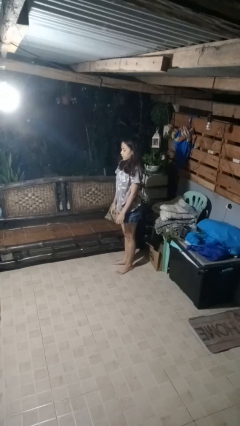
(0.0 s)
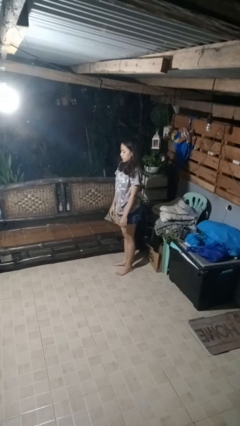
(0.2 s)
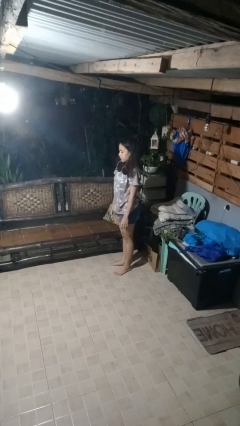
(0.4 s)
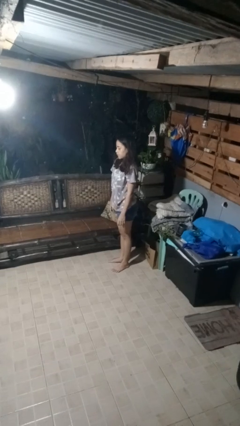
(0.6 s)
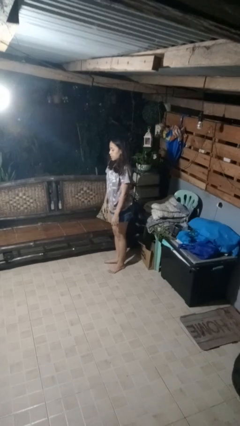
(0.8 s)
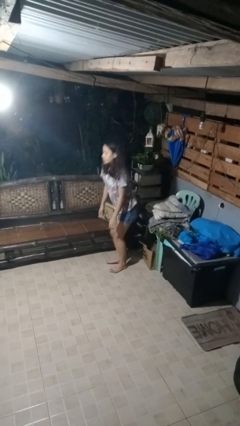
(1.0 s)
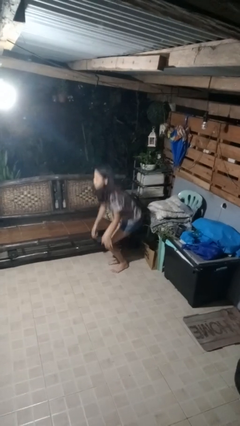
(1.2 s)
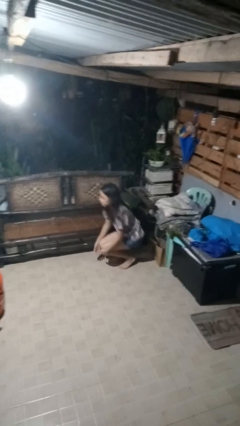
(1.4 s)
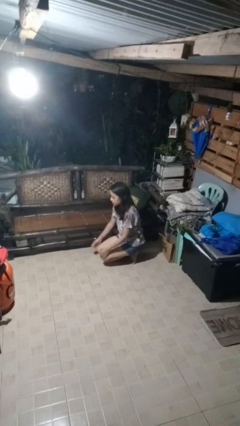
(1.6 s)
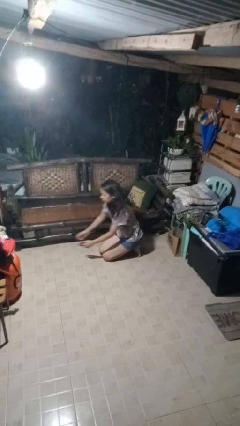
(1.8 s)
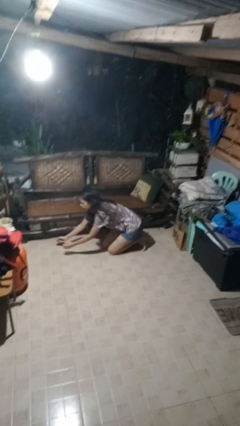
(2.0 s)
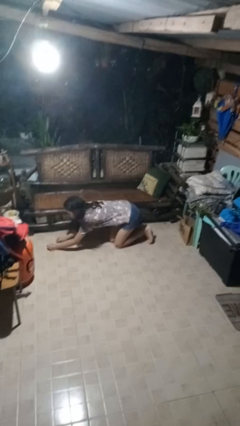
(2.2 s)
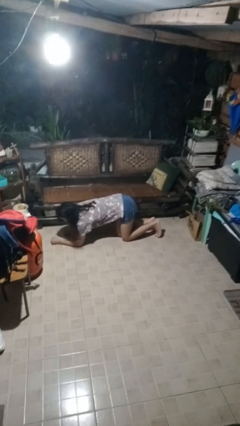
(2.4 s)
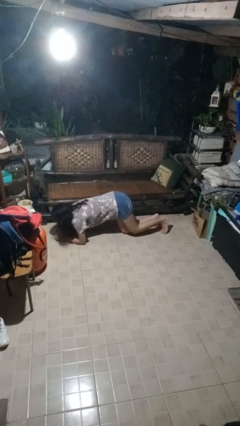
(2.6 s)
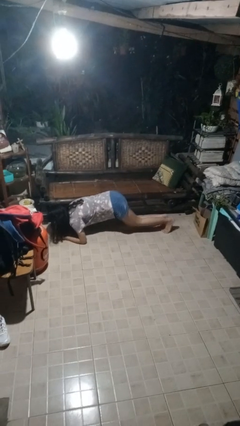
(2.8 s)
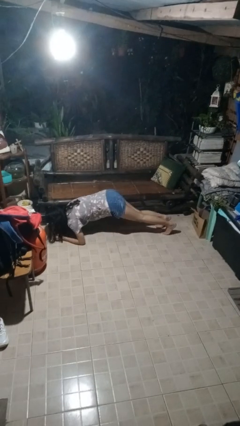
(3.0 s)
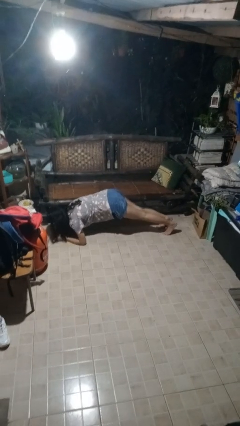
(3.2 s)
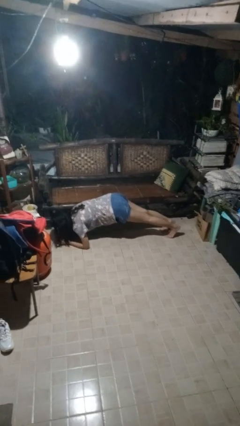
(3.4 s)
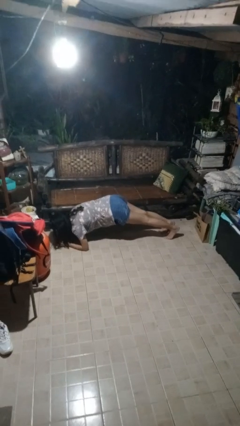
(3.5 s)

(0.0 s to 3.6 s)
person exercises with plank

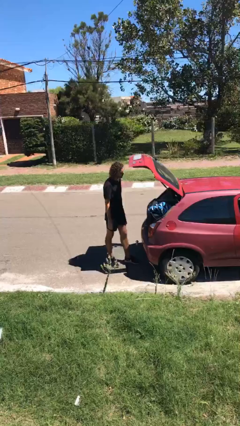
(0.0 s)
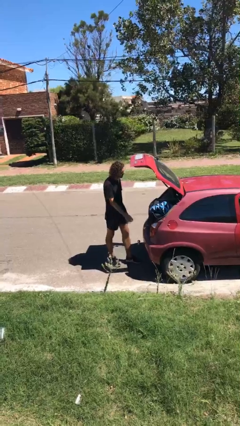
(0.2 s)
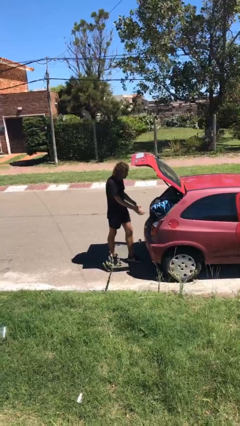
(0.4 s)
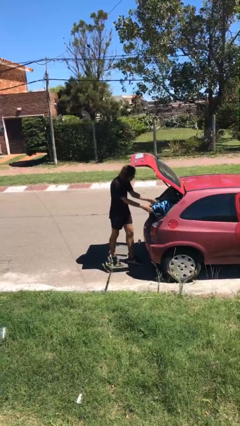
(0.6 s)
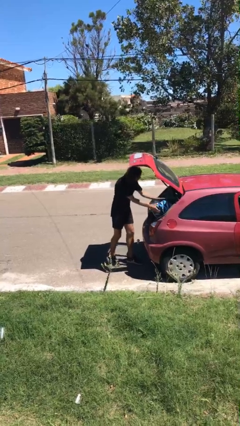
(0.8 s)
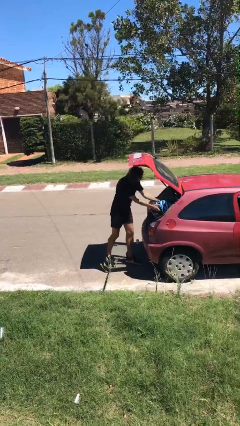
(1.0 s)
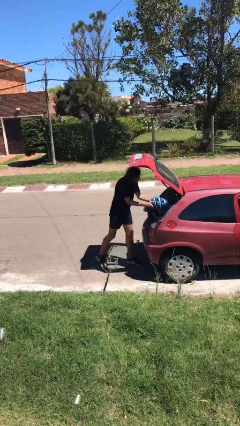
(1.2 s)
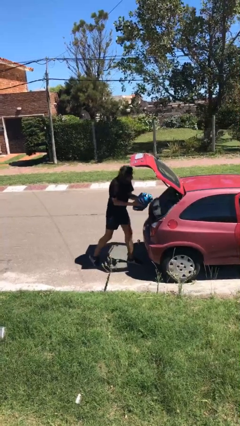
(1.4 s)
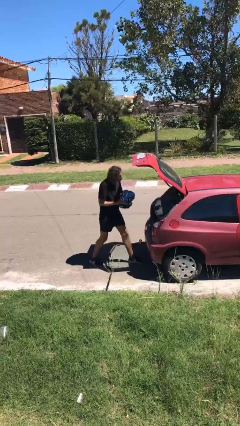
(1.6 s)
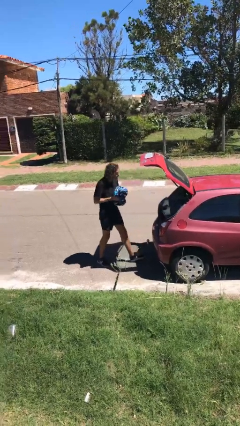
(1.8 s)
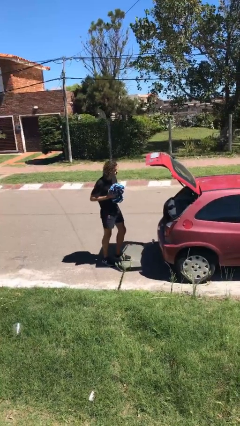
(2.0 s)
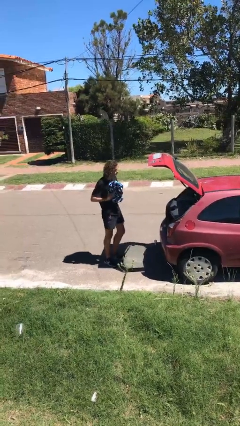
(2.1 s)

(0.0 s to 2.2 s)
person unloads car

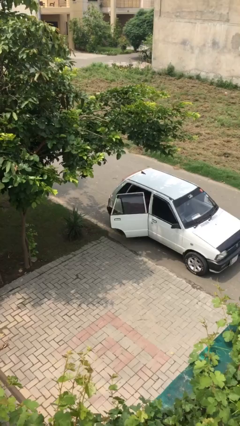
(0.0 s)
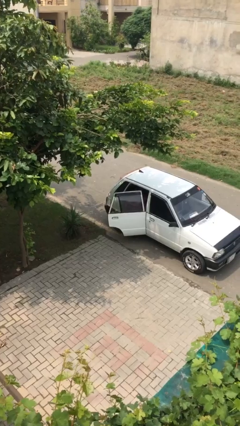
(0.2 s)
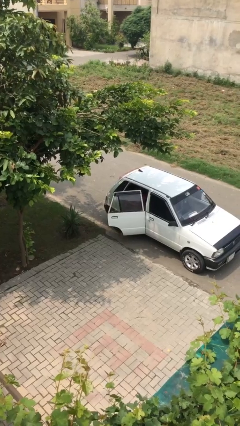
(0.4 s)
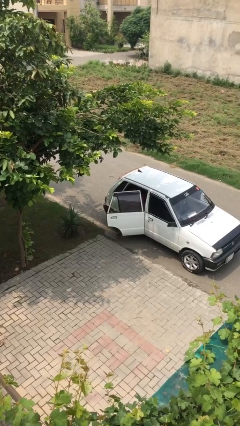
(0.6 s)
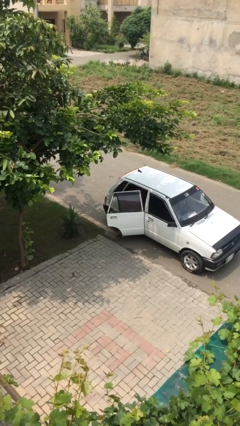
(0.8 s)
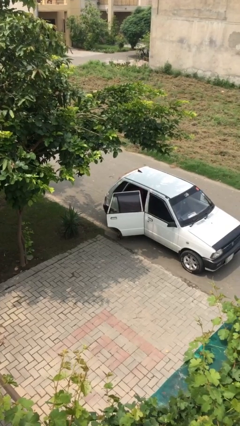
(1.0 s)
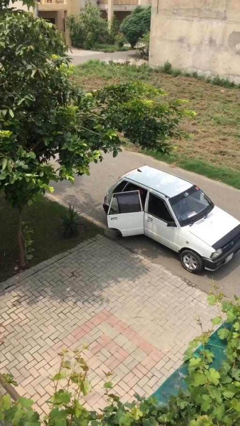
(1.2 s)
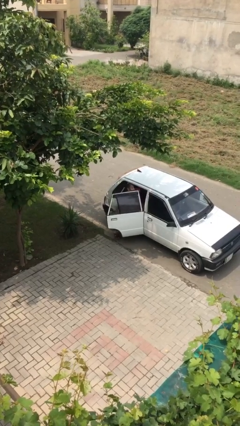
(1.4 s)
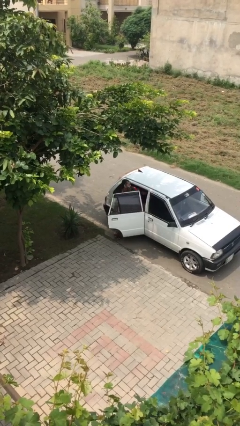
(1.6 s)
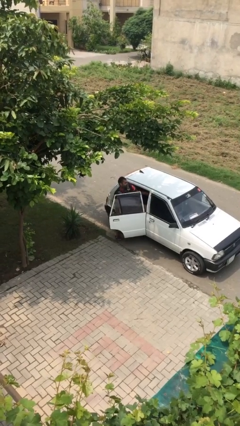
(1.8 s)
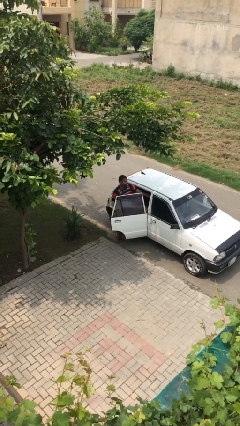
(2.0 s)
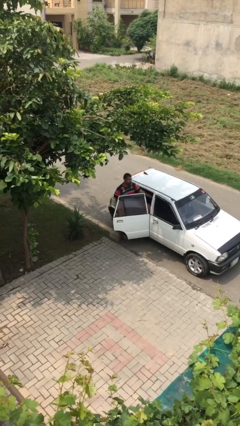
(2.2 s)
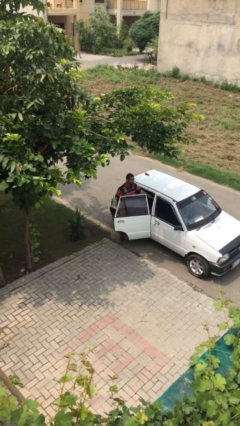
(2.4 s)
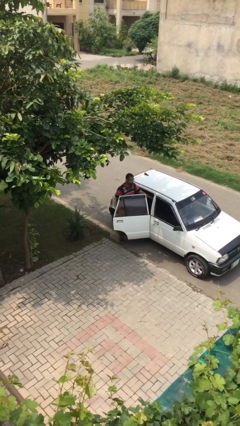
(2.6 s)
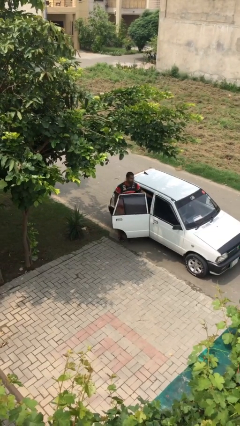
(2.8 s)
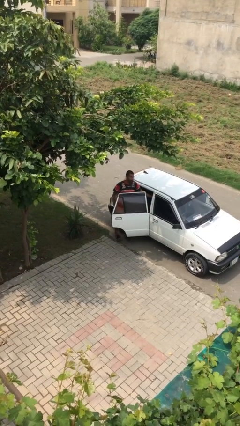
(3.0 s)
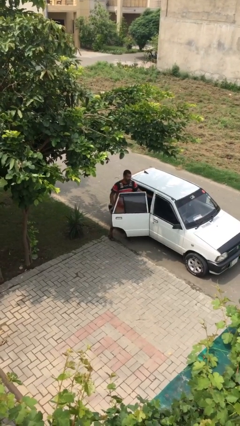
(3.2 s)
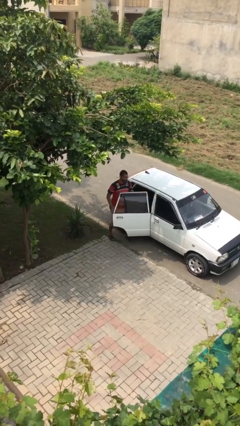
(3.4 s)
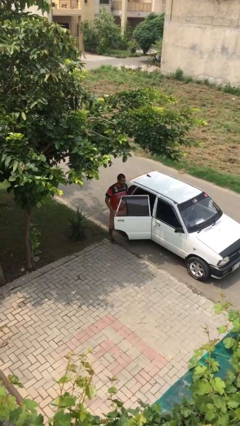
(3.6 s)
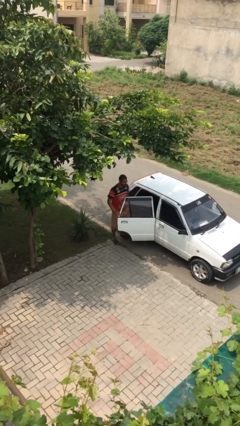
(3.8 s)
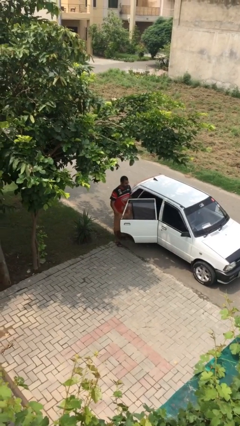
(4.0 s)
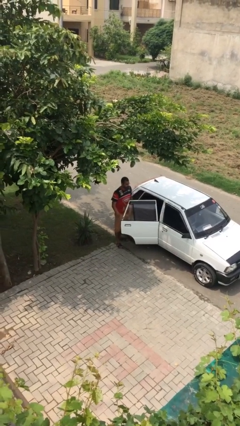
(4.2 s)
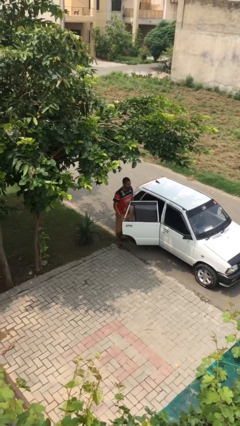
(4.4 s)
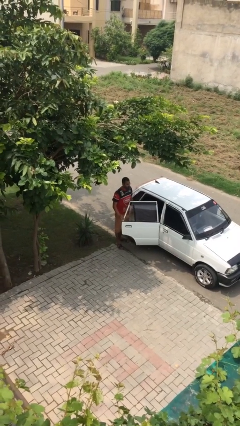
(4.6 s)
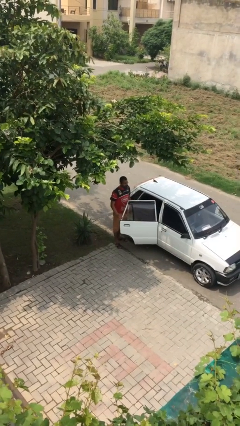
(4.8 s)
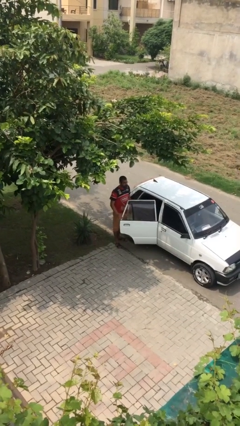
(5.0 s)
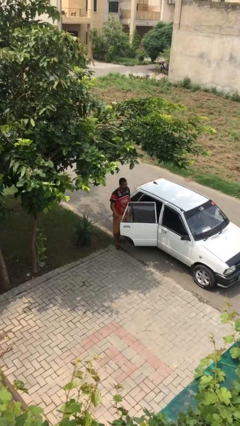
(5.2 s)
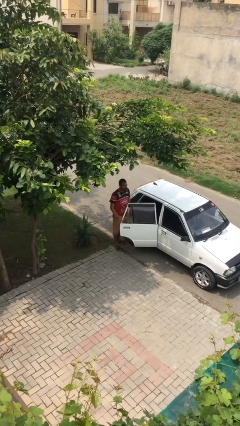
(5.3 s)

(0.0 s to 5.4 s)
person exits car

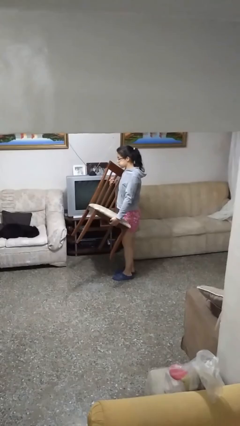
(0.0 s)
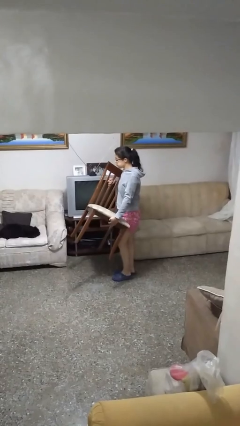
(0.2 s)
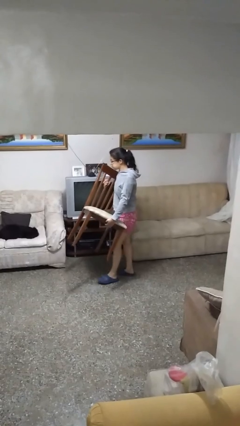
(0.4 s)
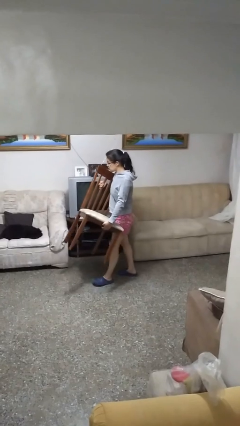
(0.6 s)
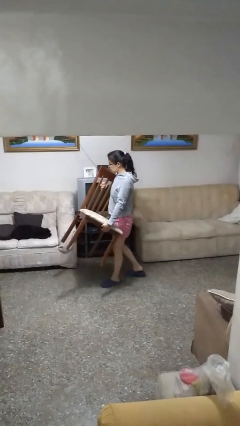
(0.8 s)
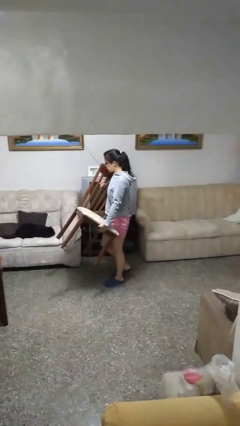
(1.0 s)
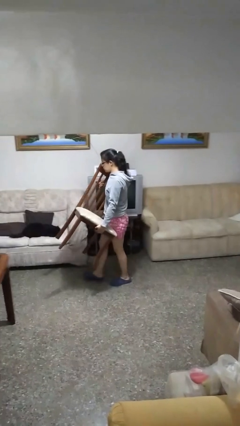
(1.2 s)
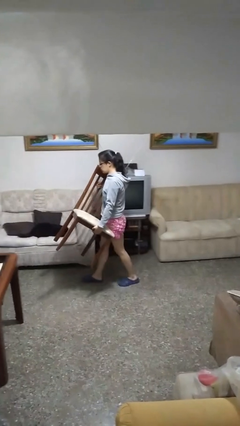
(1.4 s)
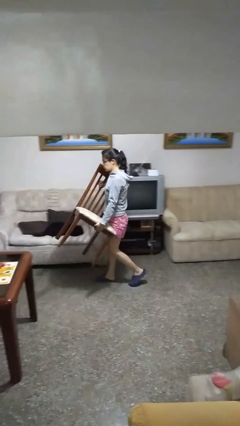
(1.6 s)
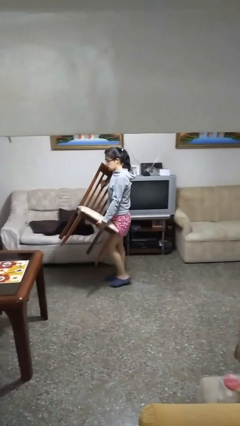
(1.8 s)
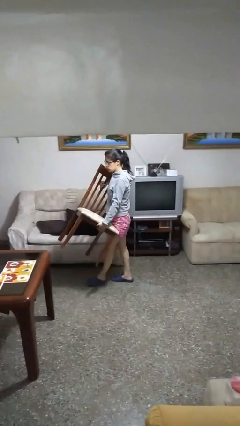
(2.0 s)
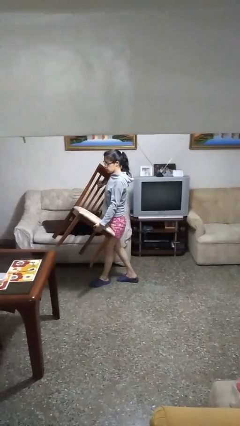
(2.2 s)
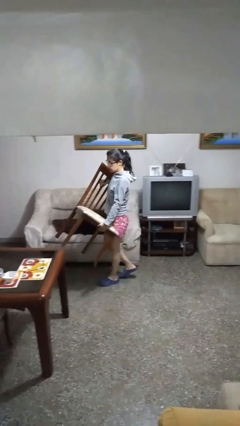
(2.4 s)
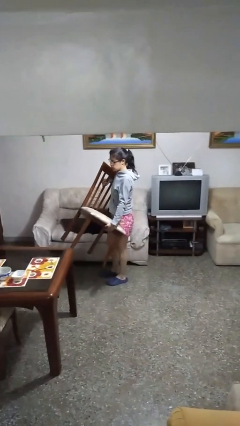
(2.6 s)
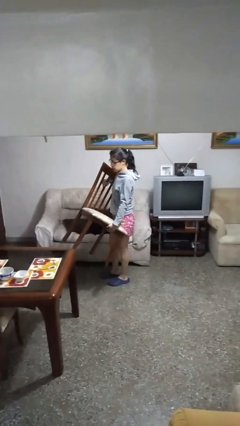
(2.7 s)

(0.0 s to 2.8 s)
person carries furniture

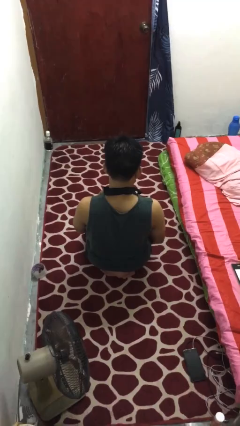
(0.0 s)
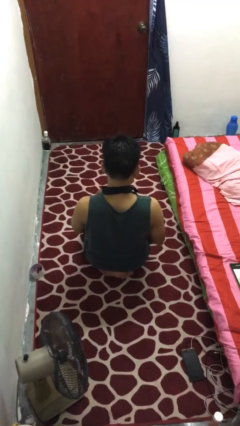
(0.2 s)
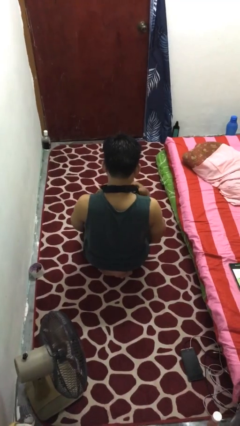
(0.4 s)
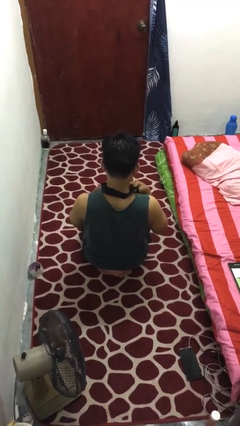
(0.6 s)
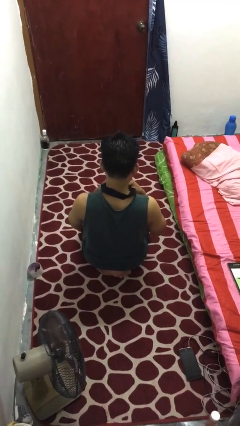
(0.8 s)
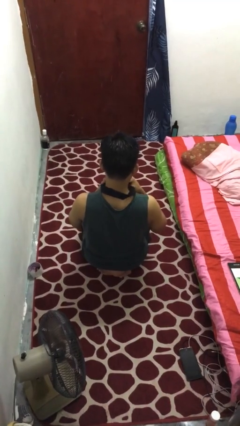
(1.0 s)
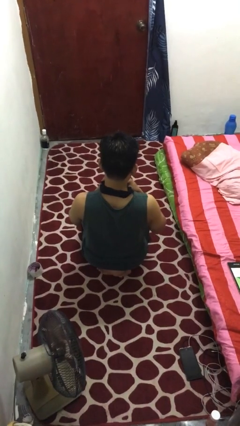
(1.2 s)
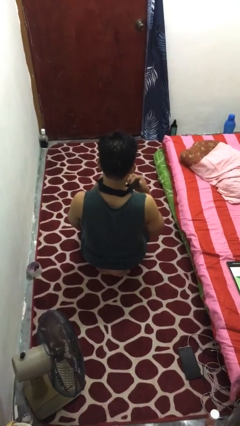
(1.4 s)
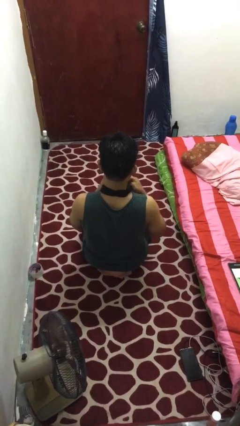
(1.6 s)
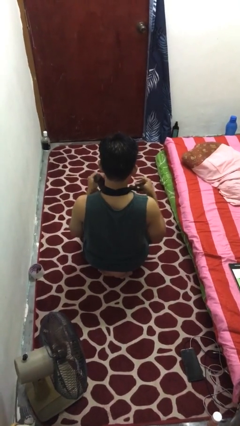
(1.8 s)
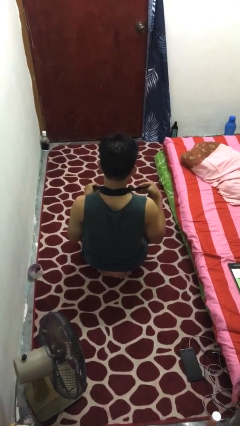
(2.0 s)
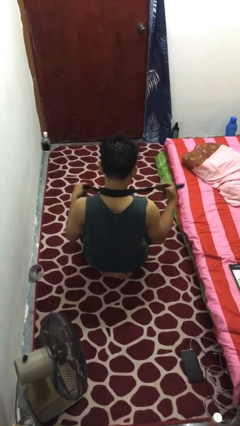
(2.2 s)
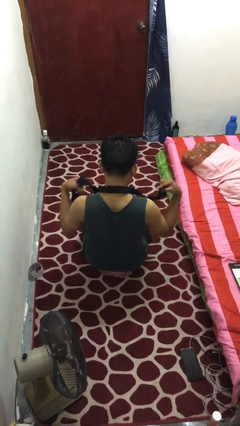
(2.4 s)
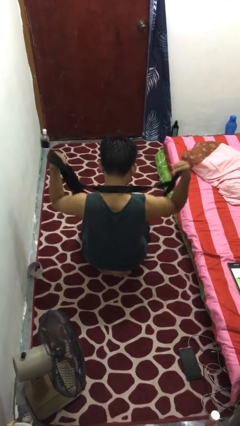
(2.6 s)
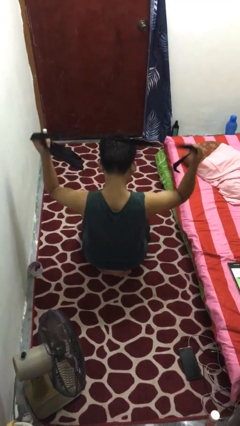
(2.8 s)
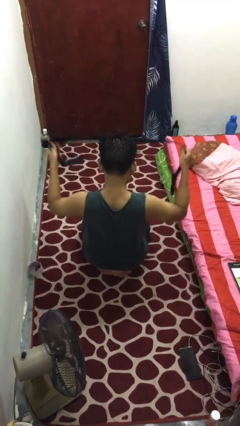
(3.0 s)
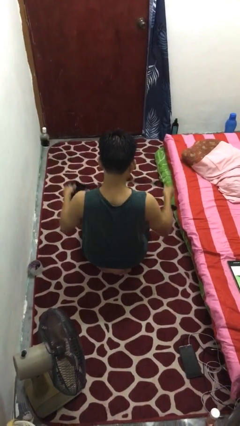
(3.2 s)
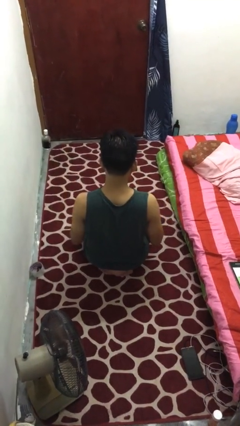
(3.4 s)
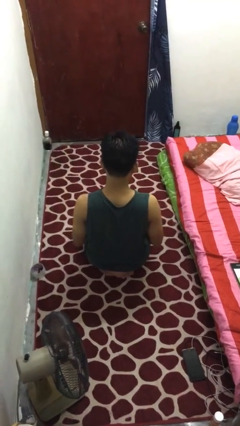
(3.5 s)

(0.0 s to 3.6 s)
person takes off necktie

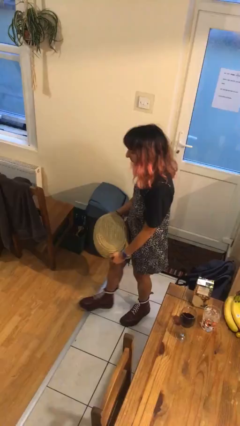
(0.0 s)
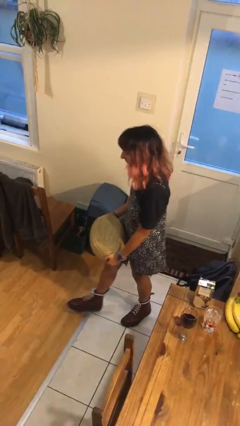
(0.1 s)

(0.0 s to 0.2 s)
person puts down object on floor
